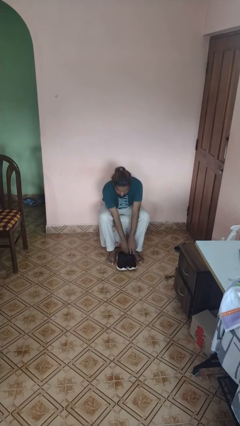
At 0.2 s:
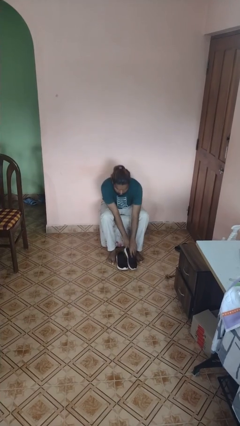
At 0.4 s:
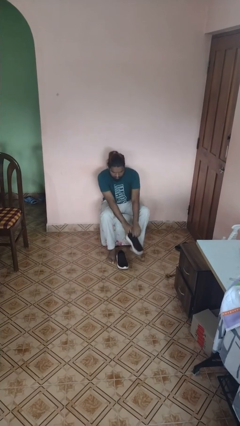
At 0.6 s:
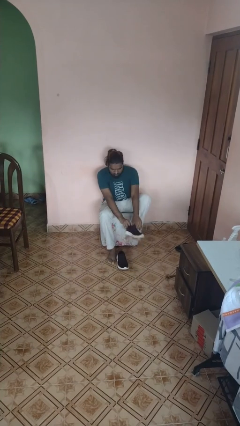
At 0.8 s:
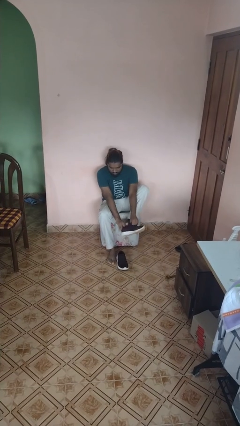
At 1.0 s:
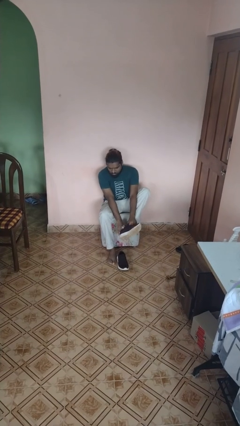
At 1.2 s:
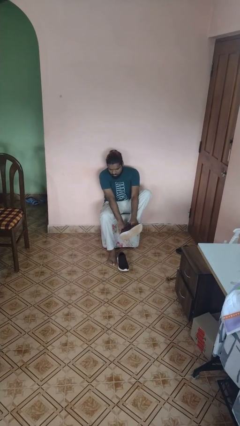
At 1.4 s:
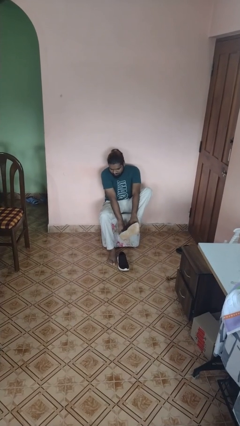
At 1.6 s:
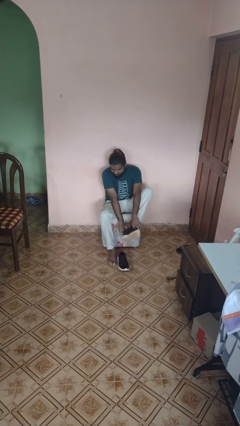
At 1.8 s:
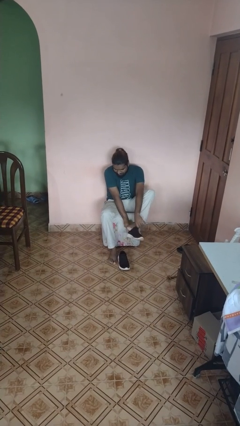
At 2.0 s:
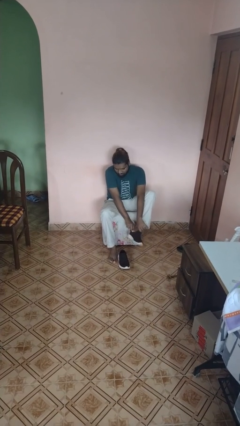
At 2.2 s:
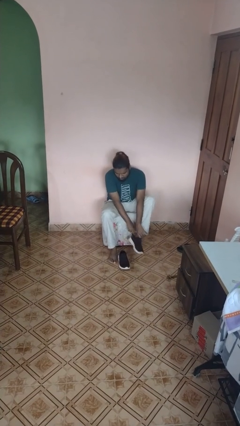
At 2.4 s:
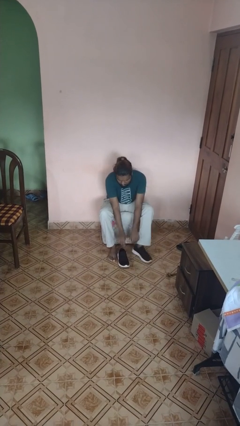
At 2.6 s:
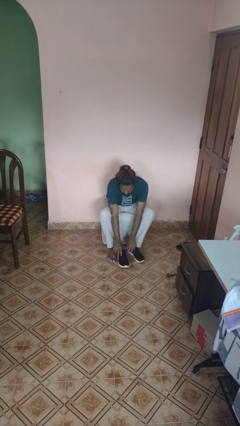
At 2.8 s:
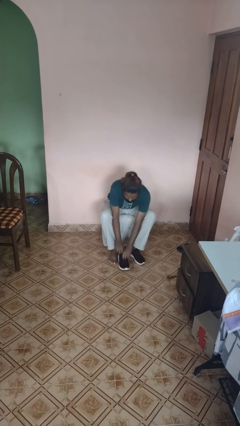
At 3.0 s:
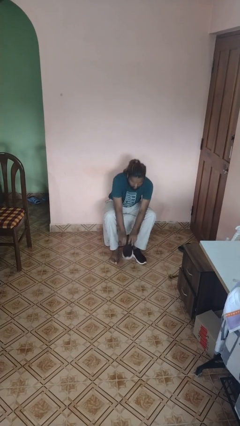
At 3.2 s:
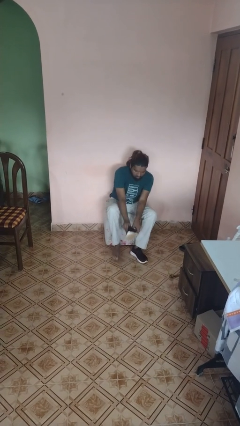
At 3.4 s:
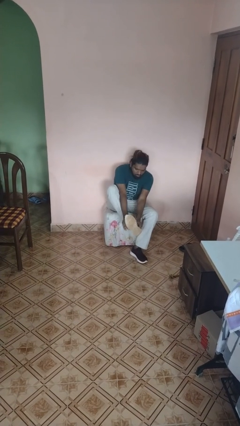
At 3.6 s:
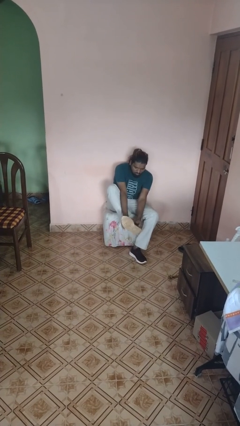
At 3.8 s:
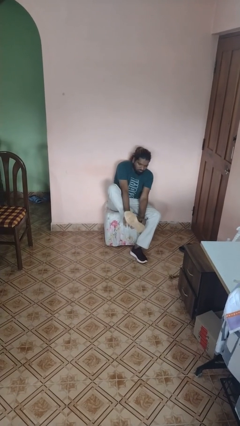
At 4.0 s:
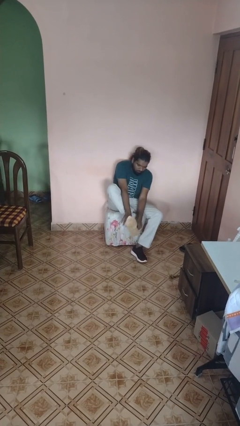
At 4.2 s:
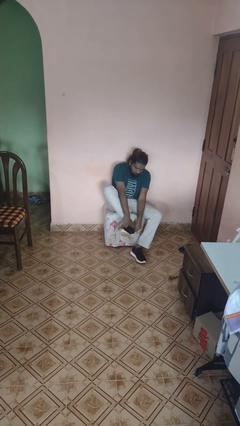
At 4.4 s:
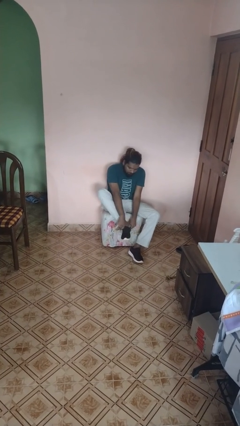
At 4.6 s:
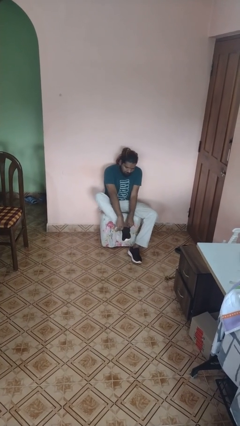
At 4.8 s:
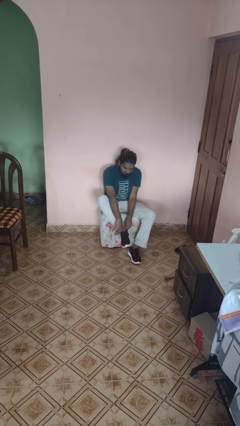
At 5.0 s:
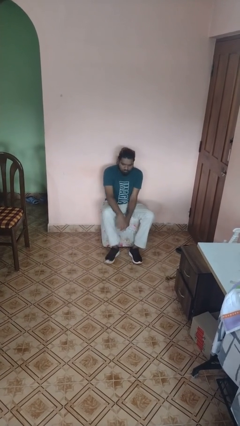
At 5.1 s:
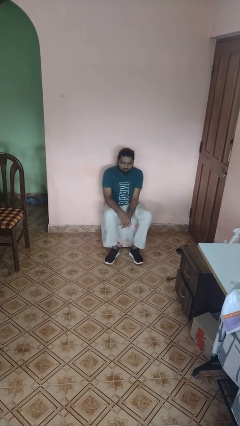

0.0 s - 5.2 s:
person puts on shoes

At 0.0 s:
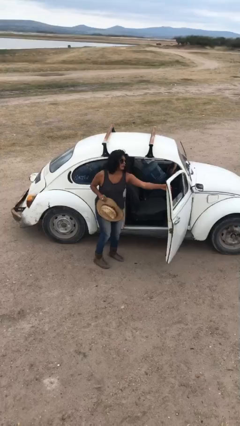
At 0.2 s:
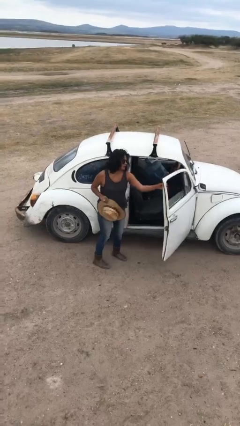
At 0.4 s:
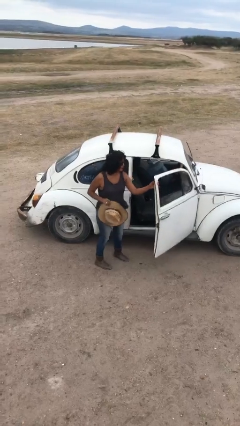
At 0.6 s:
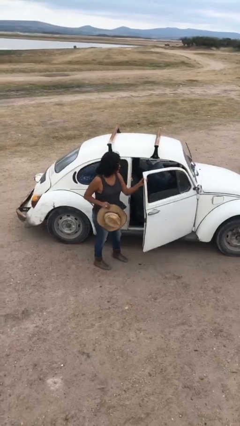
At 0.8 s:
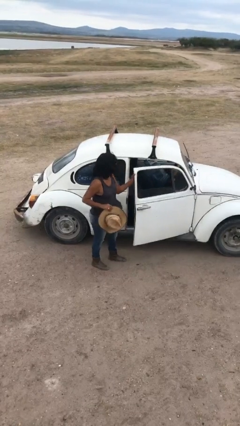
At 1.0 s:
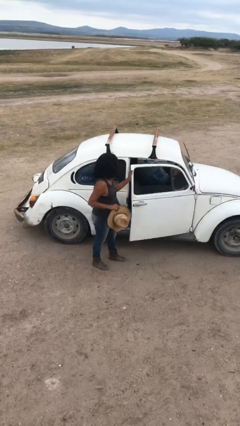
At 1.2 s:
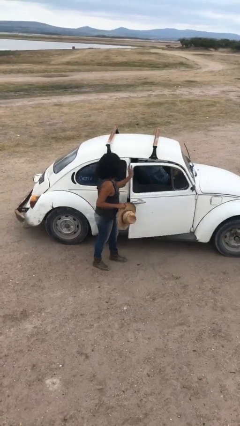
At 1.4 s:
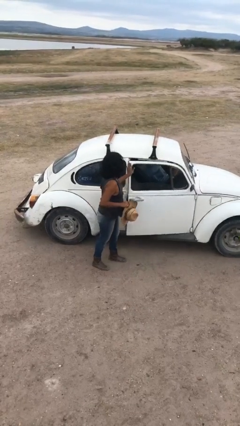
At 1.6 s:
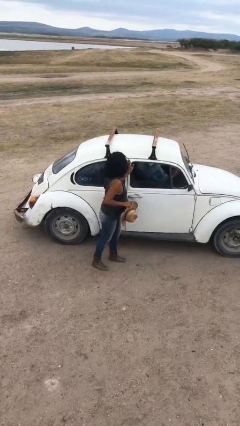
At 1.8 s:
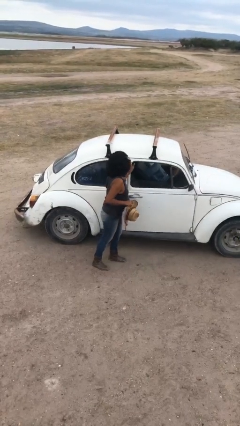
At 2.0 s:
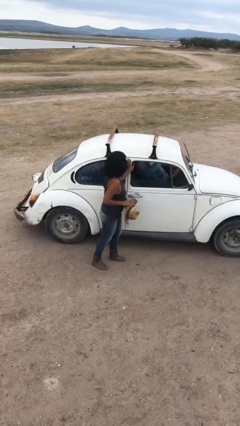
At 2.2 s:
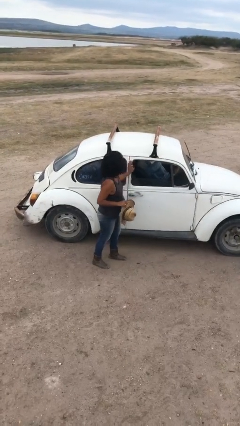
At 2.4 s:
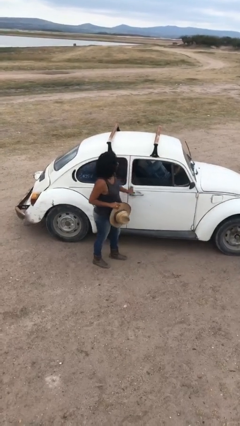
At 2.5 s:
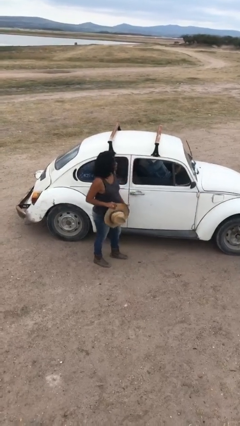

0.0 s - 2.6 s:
person closes car door

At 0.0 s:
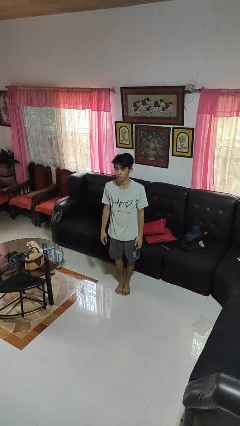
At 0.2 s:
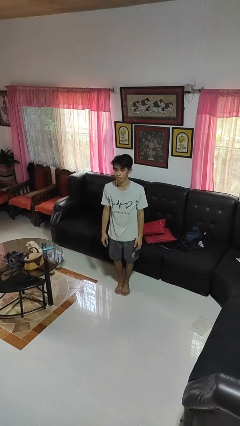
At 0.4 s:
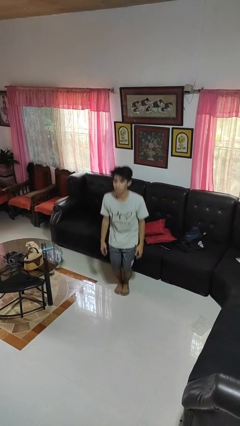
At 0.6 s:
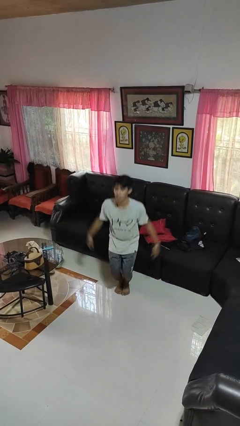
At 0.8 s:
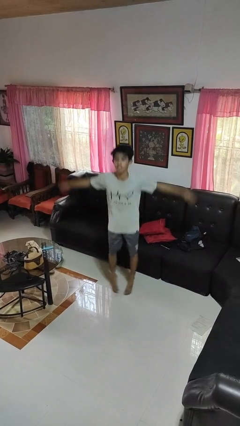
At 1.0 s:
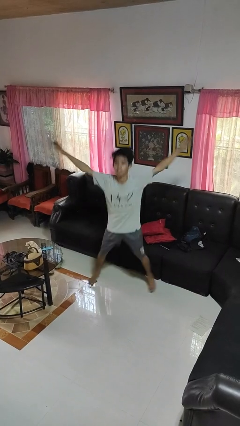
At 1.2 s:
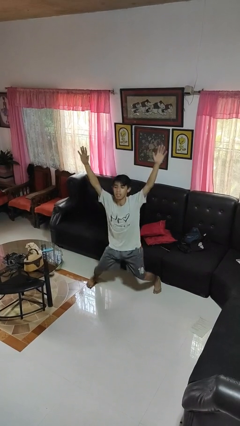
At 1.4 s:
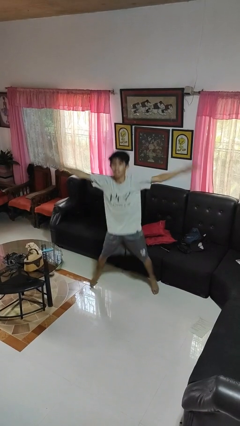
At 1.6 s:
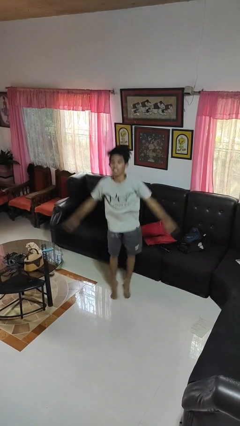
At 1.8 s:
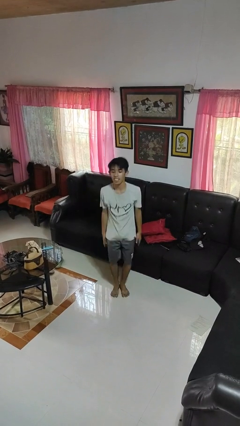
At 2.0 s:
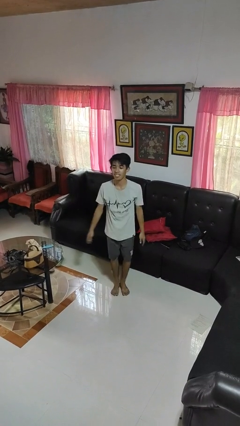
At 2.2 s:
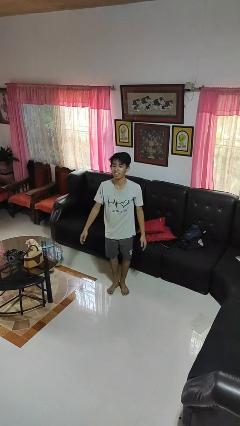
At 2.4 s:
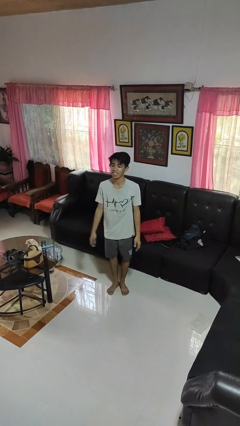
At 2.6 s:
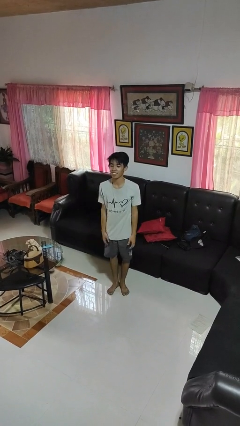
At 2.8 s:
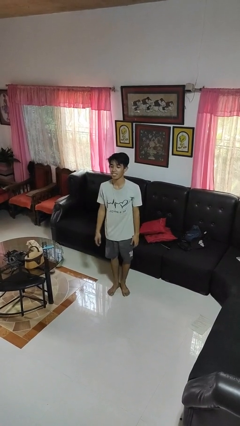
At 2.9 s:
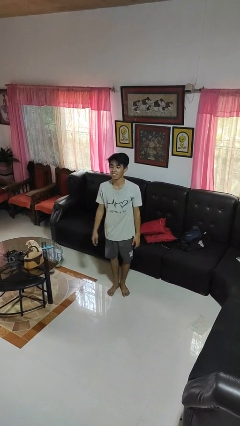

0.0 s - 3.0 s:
person exercises with jumping jacks

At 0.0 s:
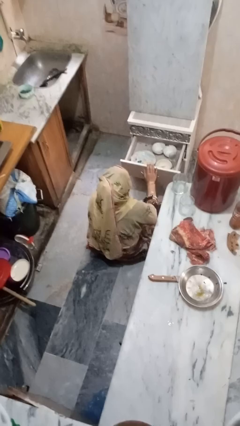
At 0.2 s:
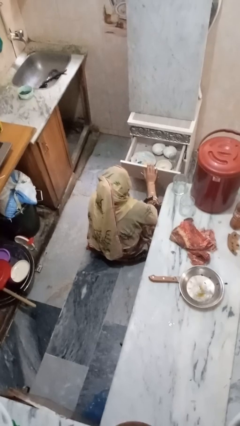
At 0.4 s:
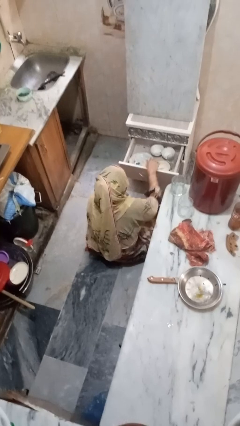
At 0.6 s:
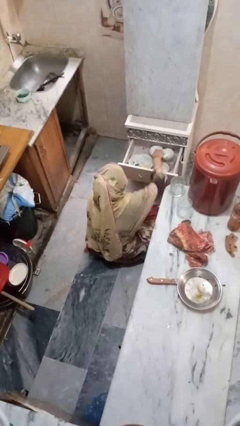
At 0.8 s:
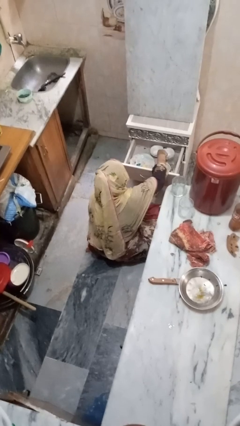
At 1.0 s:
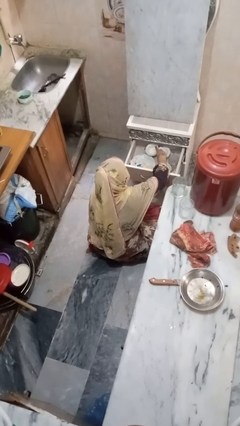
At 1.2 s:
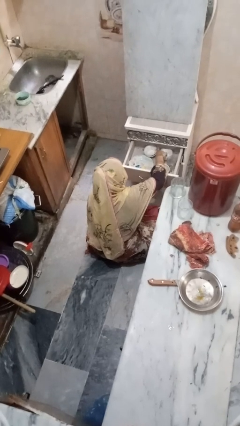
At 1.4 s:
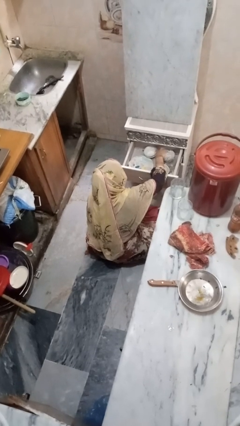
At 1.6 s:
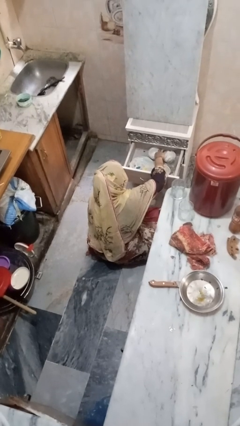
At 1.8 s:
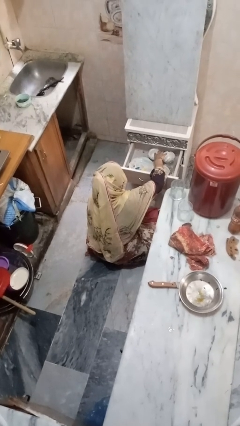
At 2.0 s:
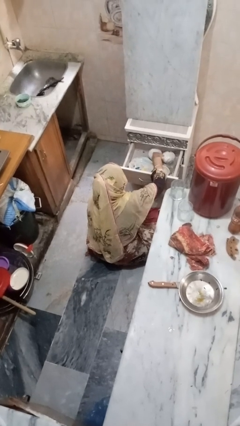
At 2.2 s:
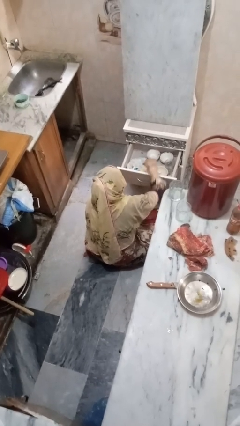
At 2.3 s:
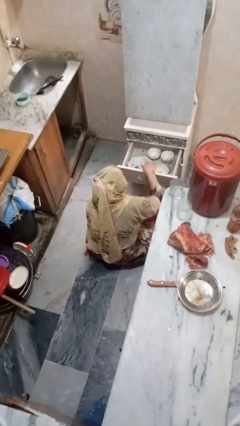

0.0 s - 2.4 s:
person searches in kitchen drawer

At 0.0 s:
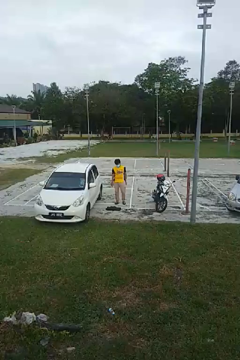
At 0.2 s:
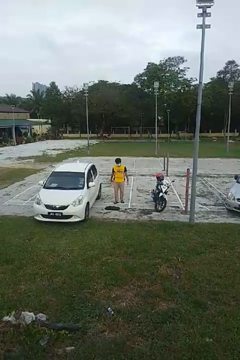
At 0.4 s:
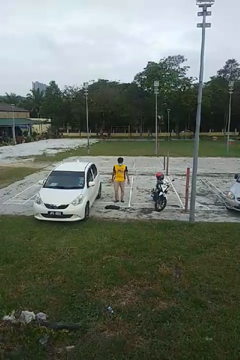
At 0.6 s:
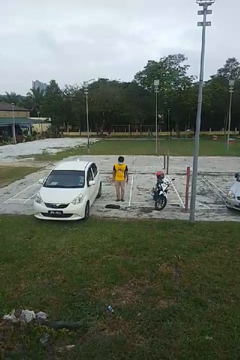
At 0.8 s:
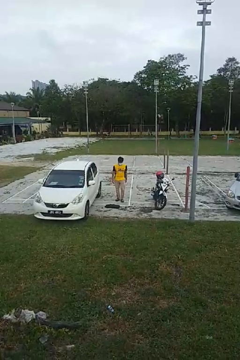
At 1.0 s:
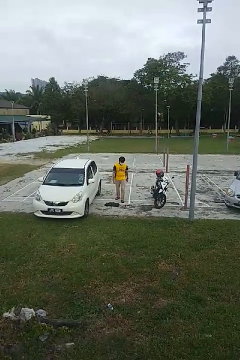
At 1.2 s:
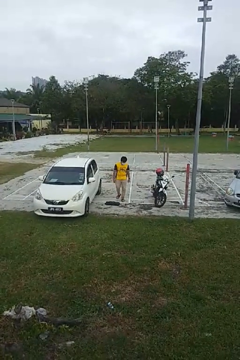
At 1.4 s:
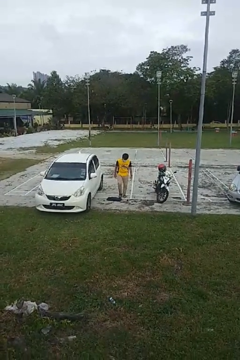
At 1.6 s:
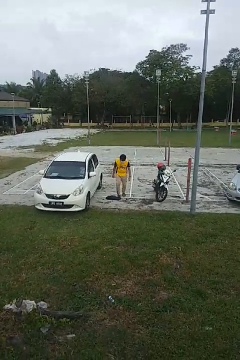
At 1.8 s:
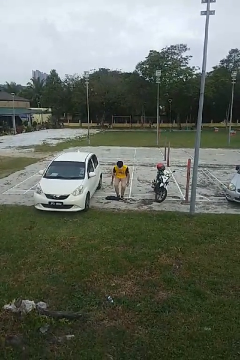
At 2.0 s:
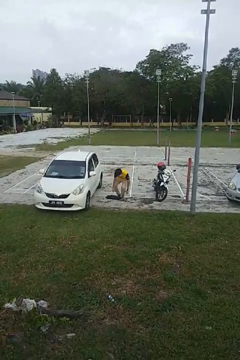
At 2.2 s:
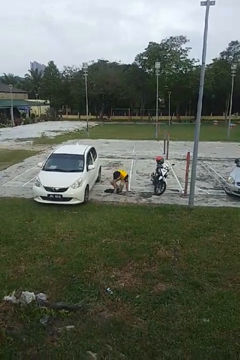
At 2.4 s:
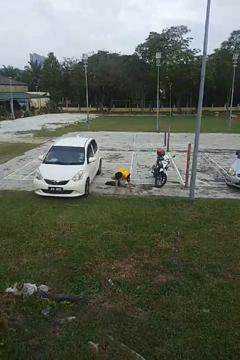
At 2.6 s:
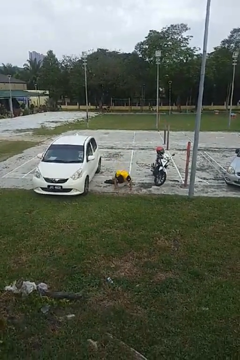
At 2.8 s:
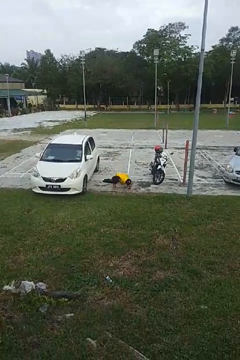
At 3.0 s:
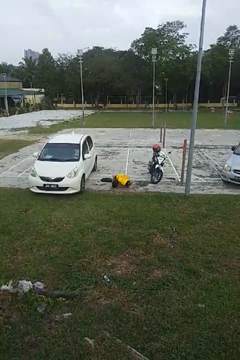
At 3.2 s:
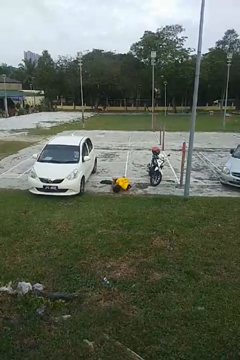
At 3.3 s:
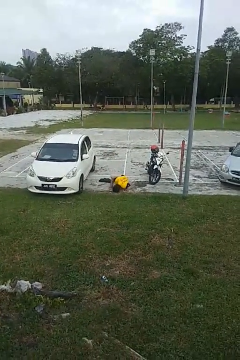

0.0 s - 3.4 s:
person trips on object on floor

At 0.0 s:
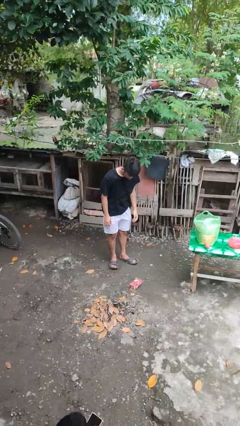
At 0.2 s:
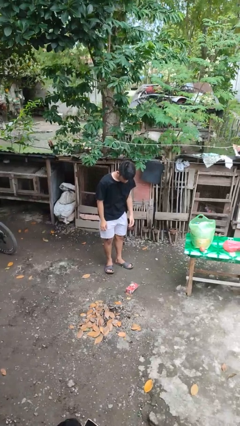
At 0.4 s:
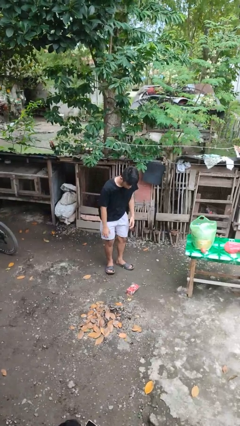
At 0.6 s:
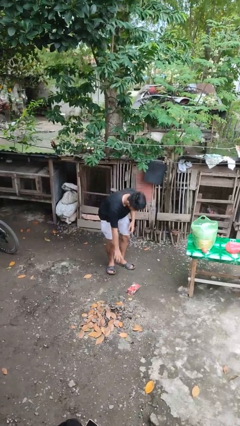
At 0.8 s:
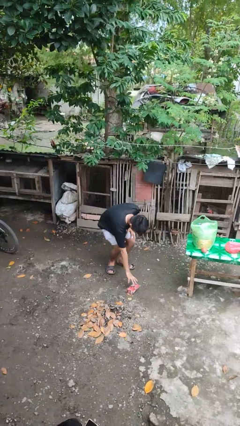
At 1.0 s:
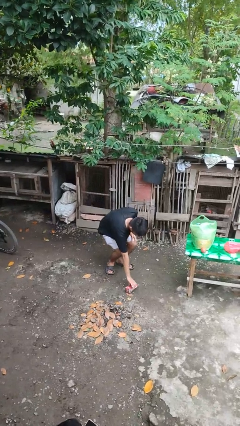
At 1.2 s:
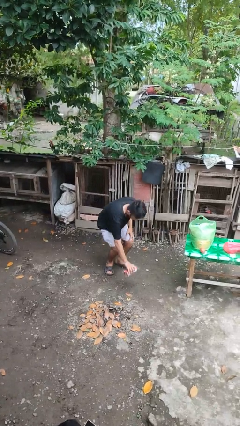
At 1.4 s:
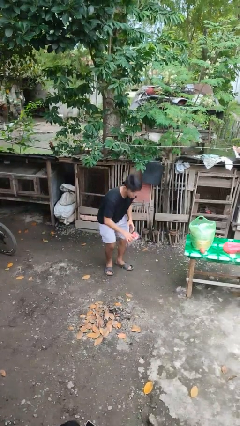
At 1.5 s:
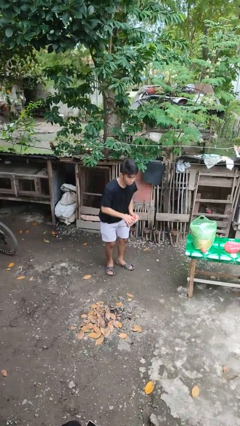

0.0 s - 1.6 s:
person picks up object from floor
